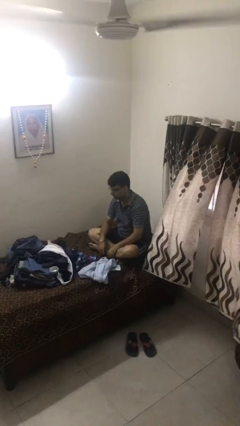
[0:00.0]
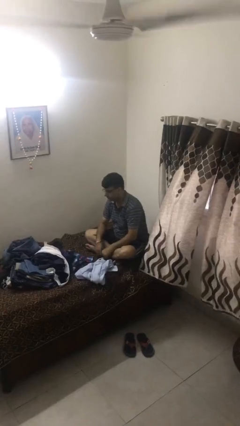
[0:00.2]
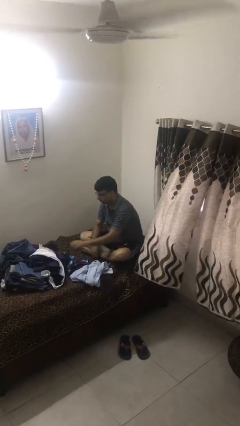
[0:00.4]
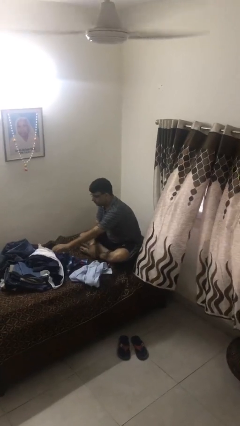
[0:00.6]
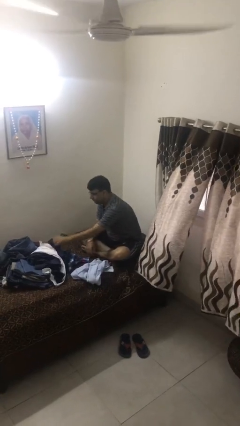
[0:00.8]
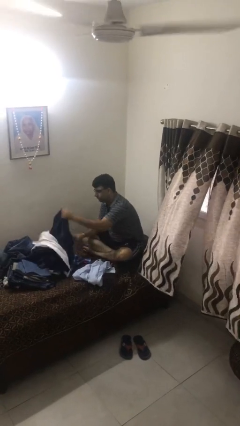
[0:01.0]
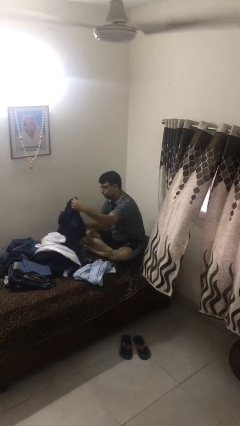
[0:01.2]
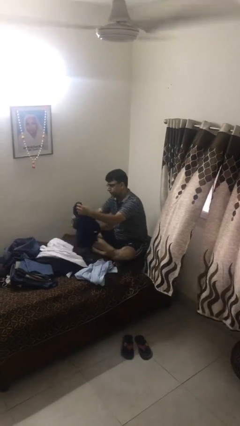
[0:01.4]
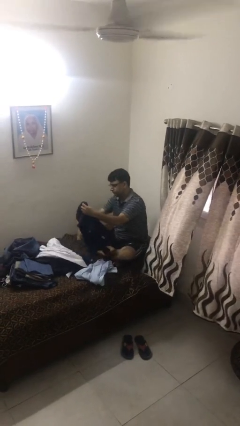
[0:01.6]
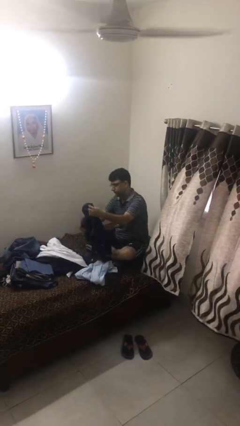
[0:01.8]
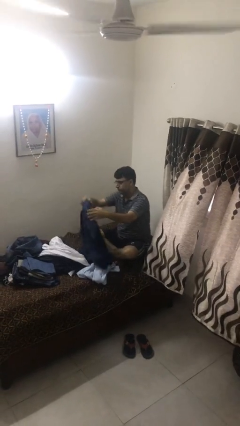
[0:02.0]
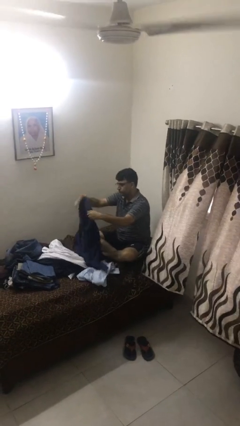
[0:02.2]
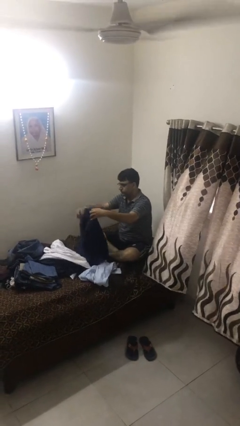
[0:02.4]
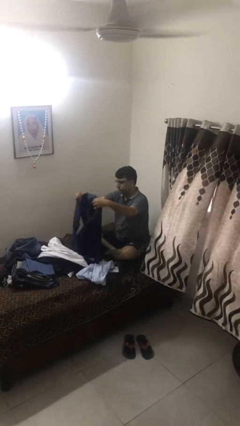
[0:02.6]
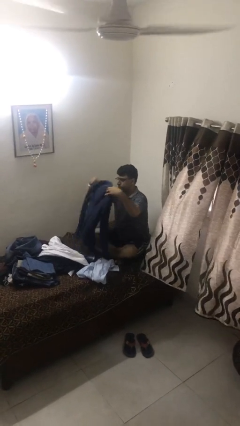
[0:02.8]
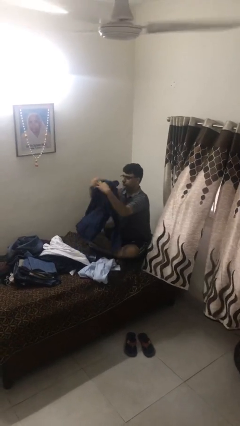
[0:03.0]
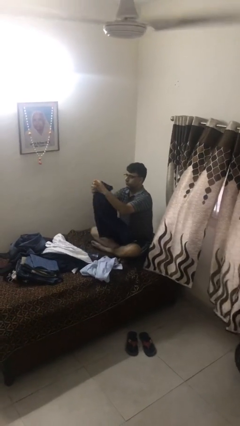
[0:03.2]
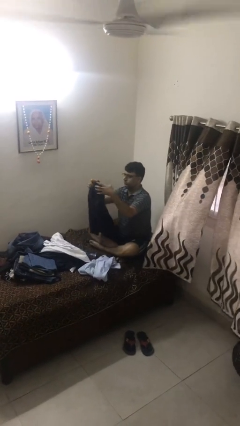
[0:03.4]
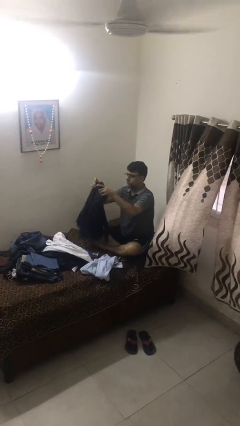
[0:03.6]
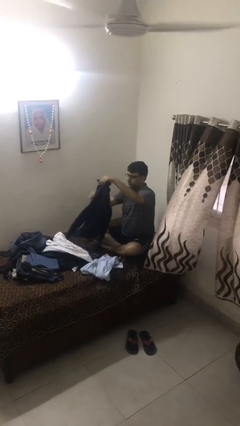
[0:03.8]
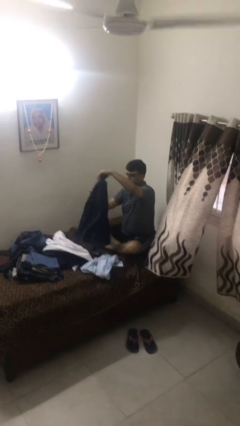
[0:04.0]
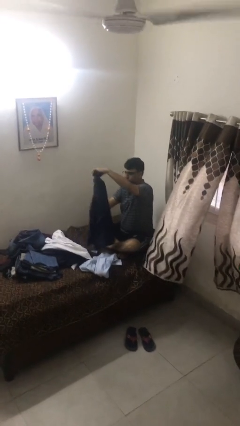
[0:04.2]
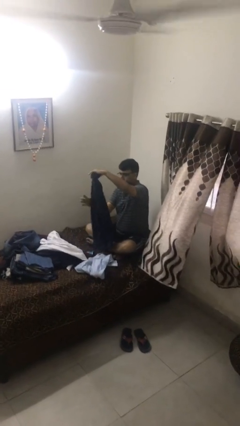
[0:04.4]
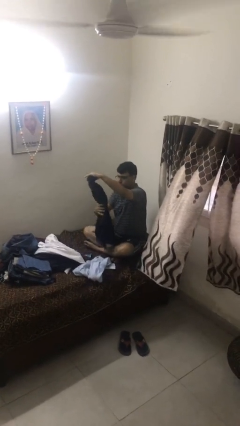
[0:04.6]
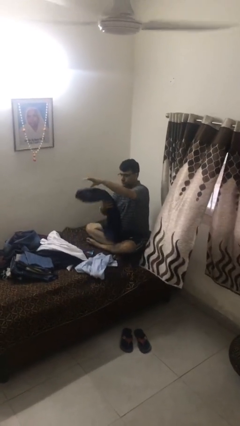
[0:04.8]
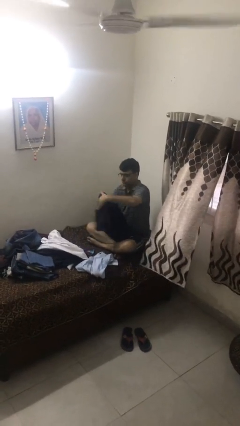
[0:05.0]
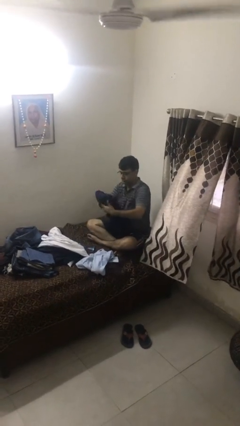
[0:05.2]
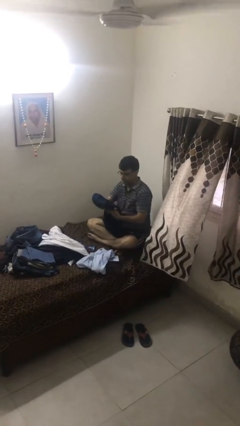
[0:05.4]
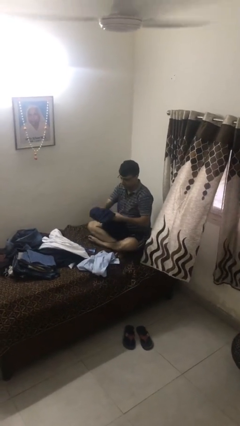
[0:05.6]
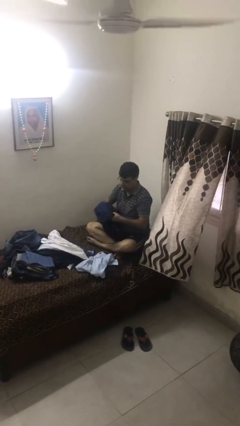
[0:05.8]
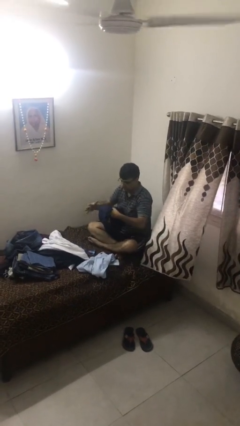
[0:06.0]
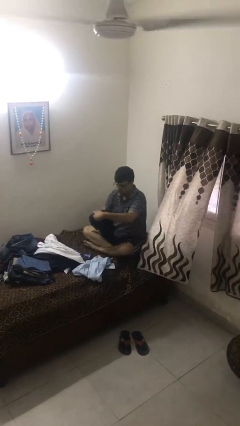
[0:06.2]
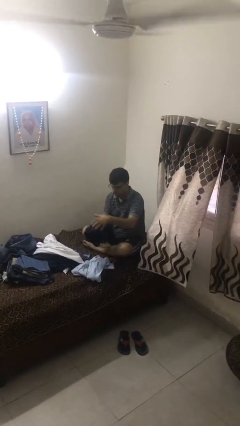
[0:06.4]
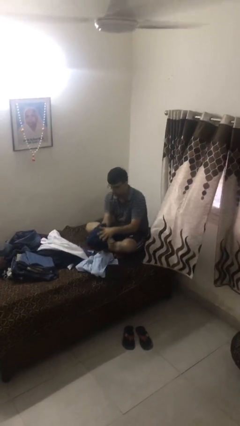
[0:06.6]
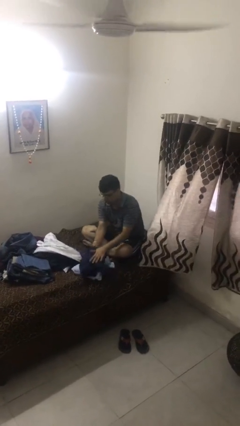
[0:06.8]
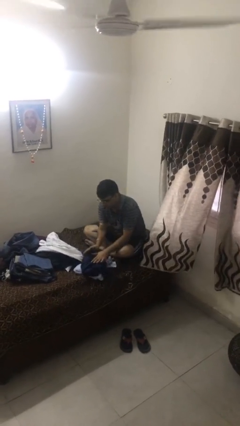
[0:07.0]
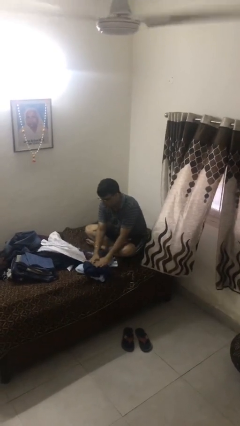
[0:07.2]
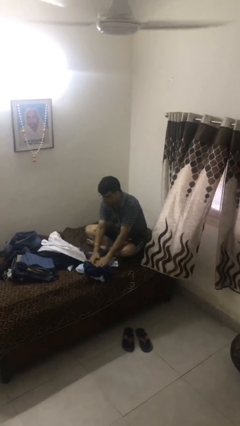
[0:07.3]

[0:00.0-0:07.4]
person folds shirt

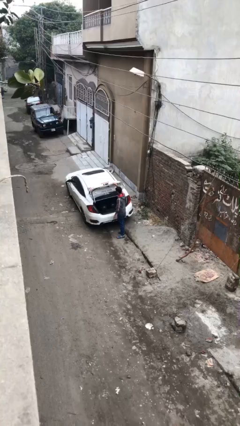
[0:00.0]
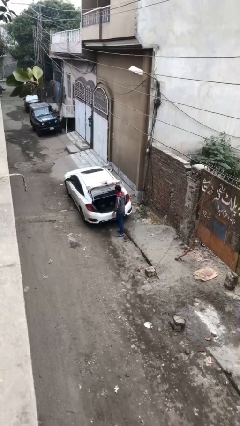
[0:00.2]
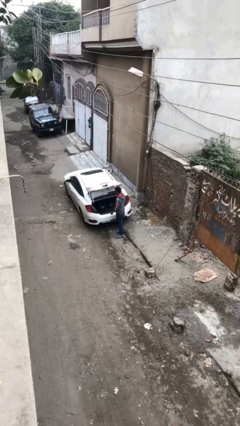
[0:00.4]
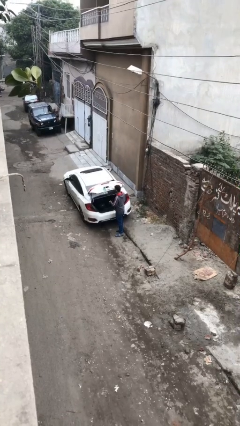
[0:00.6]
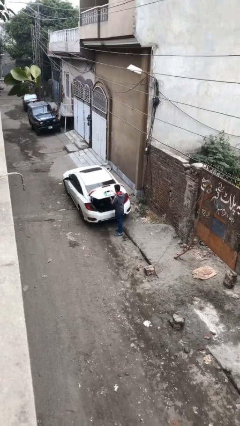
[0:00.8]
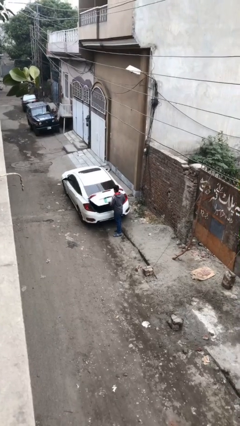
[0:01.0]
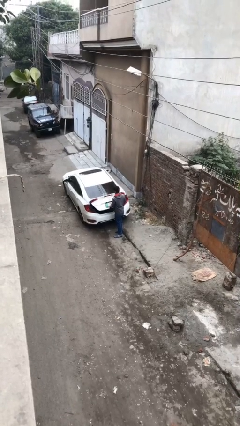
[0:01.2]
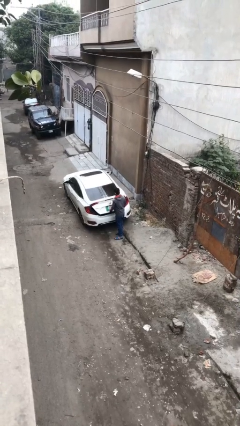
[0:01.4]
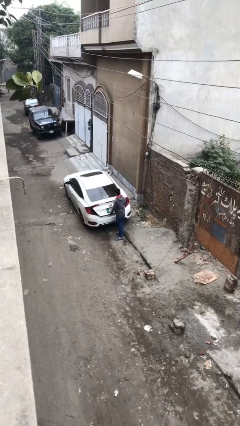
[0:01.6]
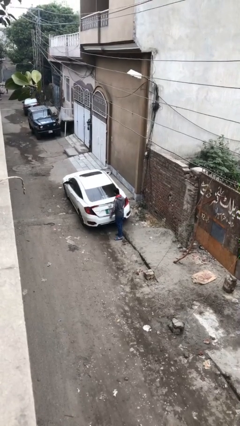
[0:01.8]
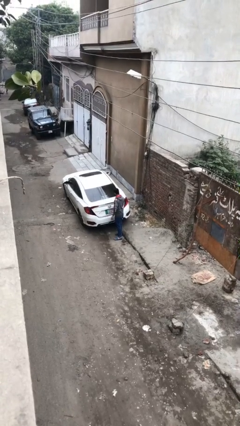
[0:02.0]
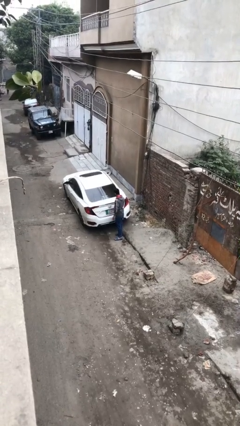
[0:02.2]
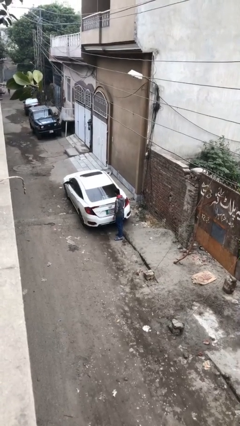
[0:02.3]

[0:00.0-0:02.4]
person closes car trunk

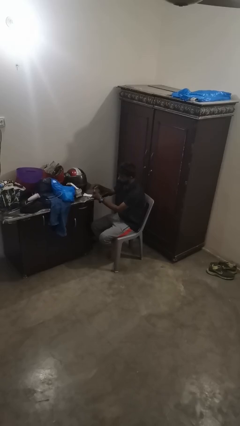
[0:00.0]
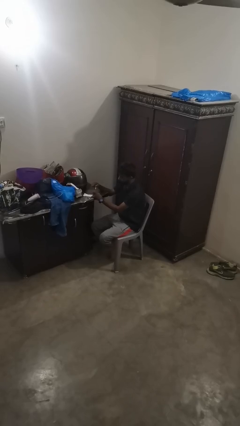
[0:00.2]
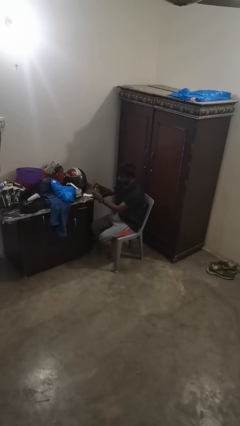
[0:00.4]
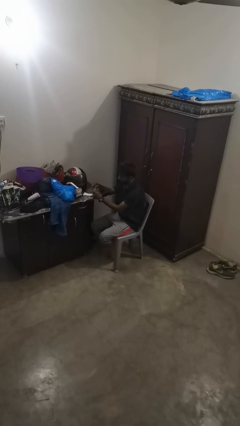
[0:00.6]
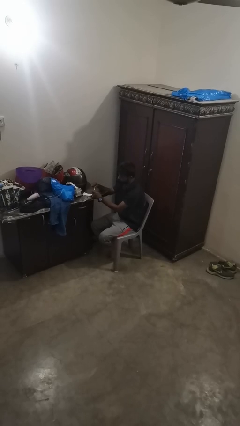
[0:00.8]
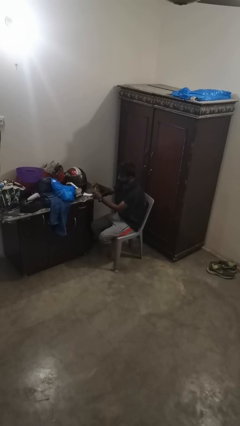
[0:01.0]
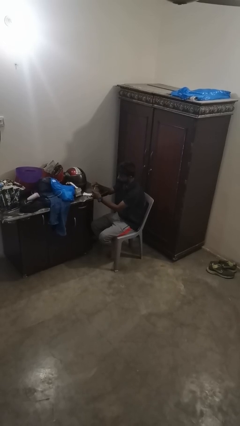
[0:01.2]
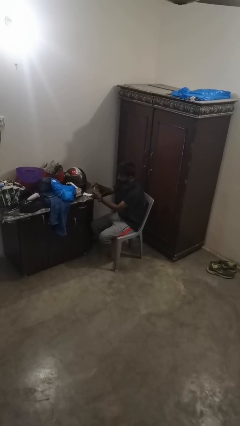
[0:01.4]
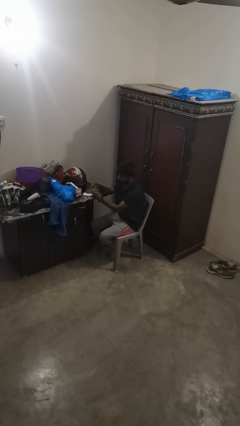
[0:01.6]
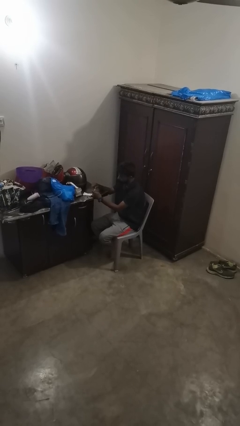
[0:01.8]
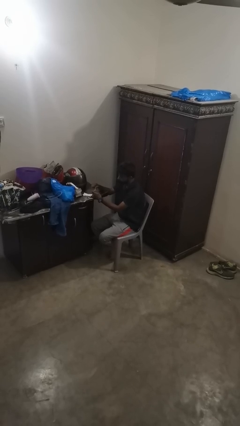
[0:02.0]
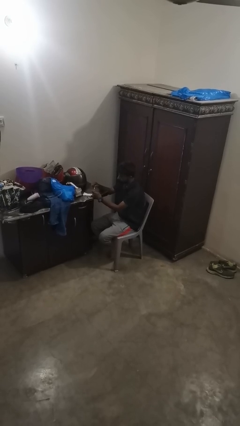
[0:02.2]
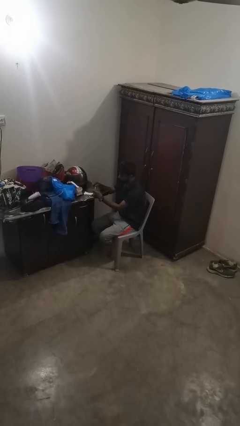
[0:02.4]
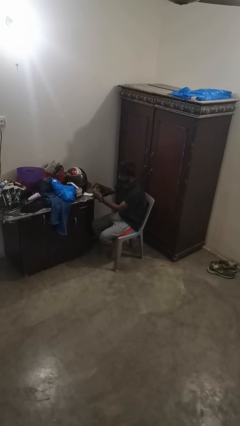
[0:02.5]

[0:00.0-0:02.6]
person paints fingernails

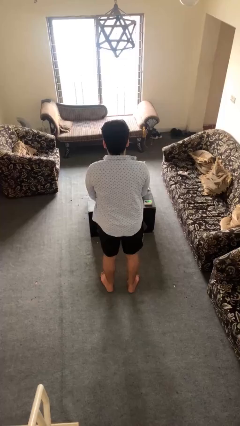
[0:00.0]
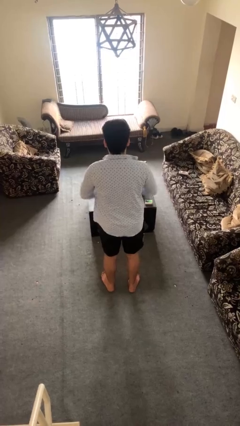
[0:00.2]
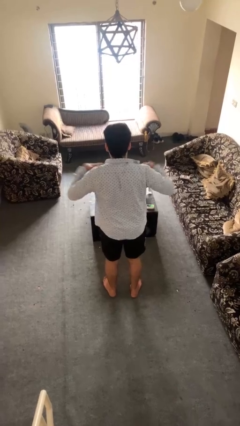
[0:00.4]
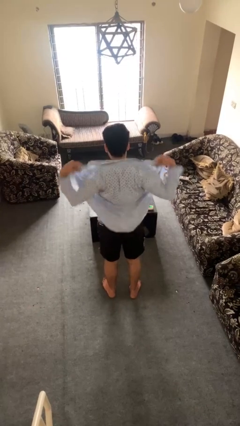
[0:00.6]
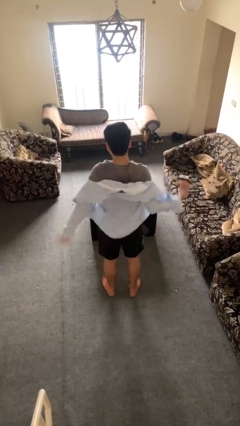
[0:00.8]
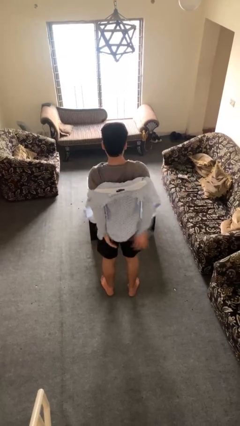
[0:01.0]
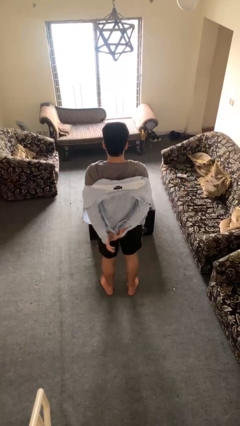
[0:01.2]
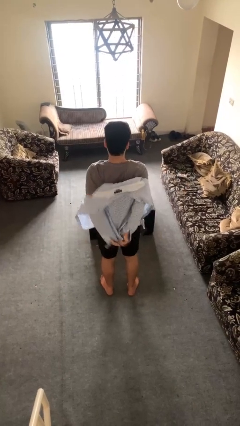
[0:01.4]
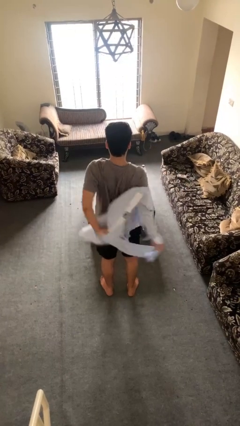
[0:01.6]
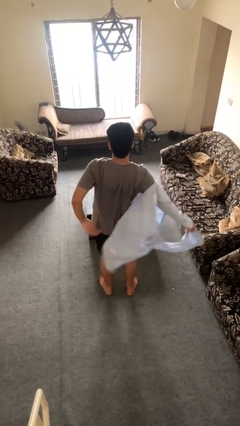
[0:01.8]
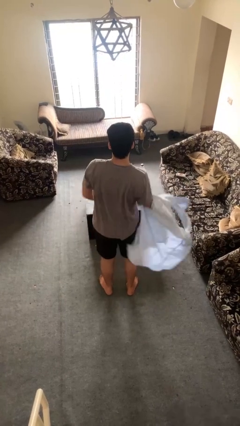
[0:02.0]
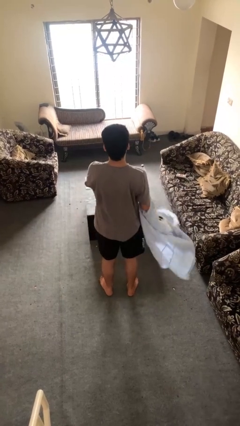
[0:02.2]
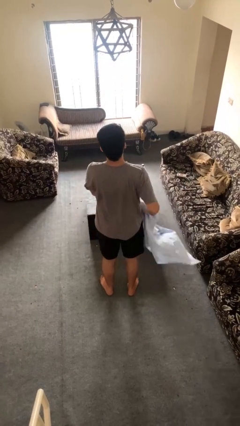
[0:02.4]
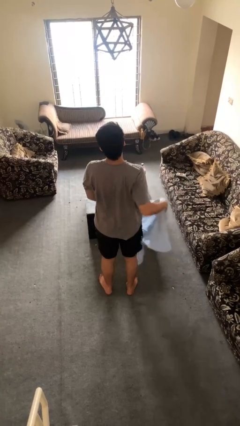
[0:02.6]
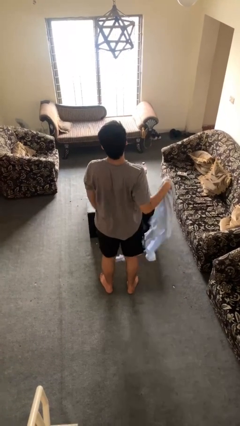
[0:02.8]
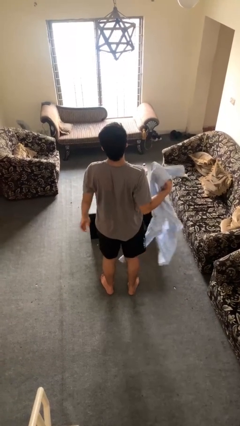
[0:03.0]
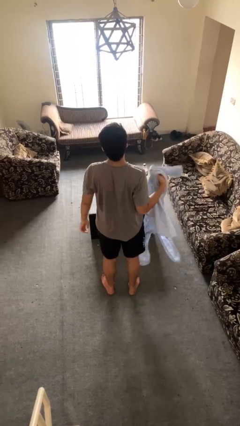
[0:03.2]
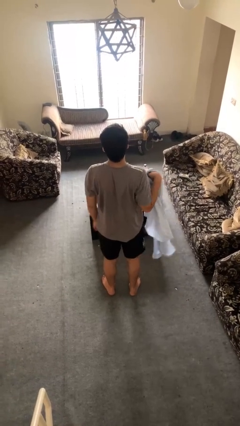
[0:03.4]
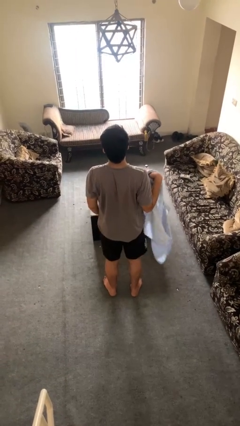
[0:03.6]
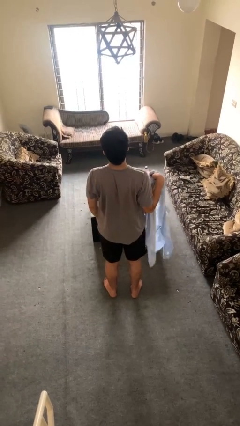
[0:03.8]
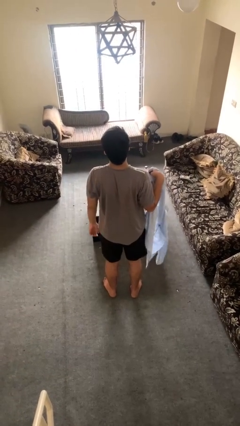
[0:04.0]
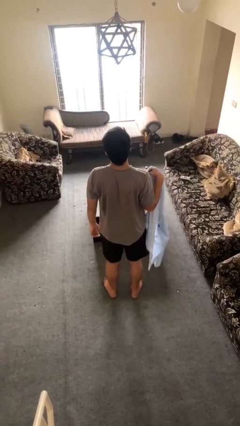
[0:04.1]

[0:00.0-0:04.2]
person takes off shirt

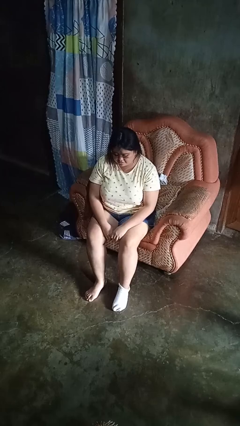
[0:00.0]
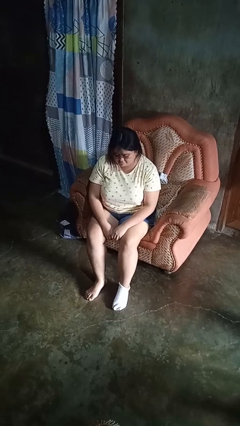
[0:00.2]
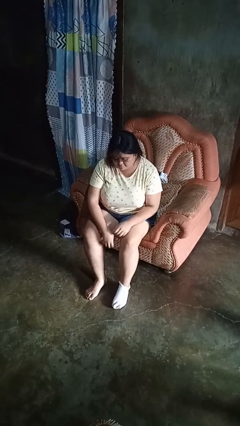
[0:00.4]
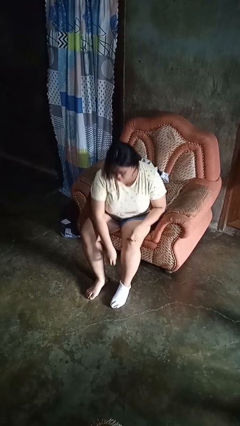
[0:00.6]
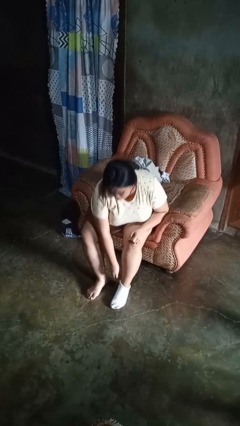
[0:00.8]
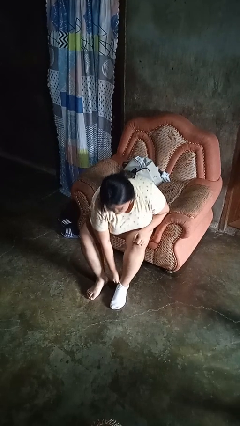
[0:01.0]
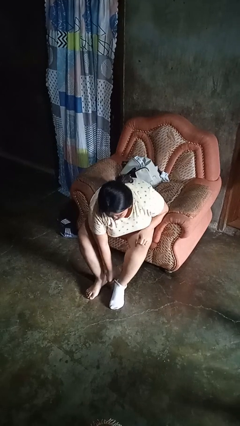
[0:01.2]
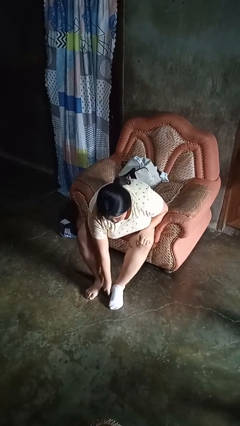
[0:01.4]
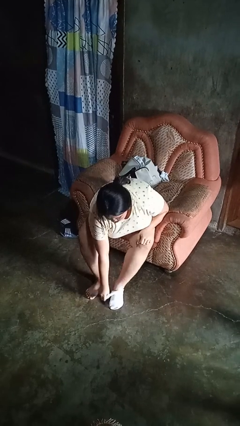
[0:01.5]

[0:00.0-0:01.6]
person takes off socks
